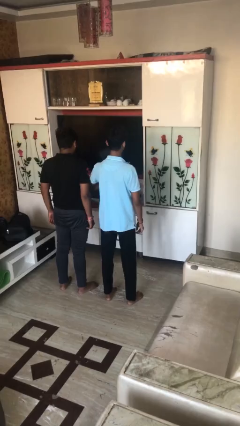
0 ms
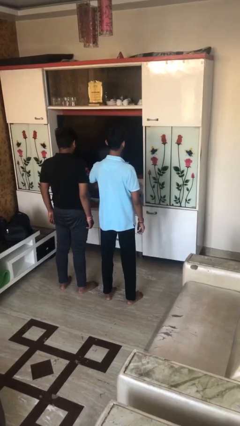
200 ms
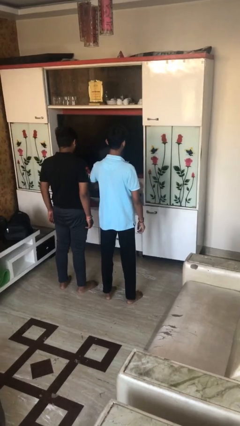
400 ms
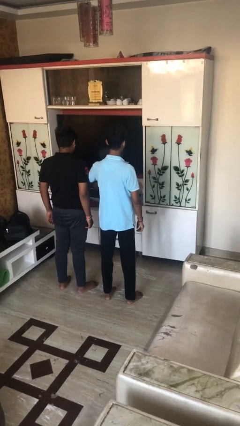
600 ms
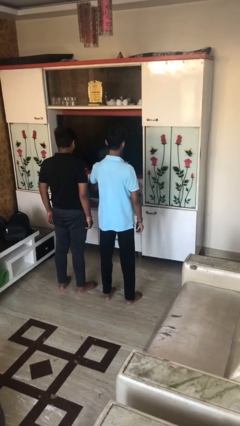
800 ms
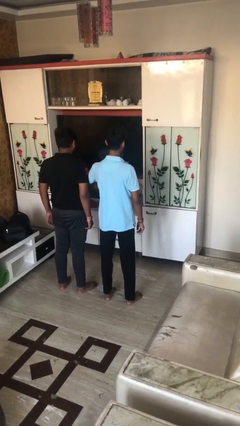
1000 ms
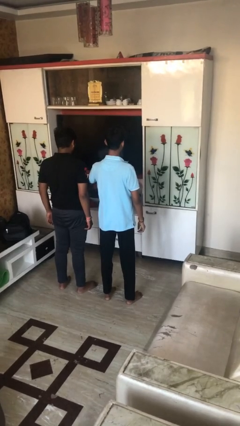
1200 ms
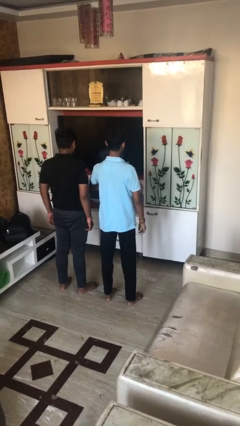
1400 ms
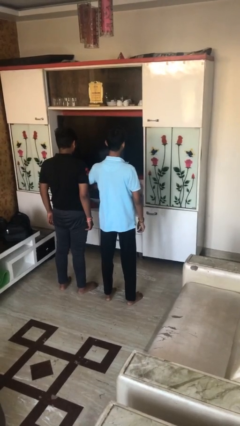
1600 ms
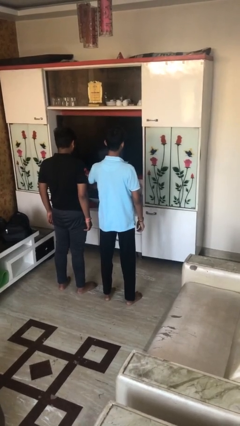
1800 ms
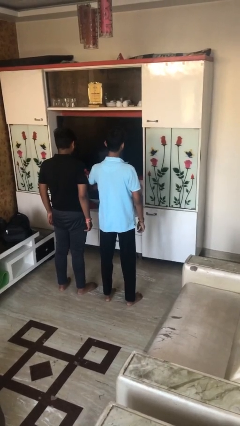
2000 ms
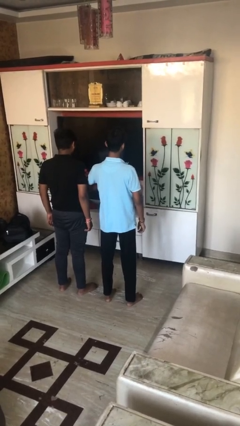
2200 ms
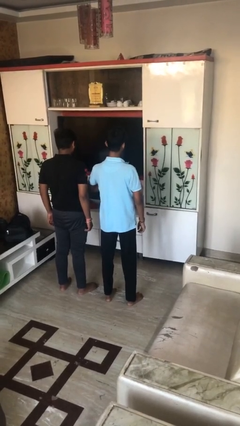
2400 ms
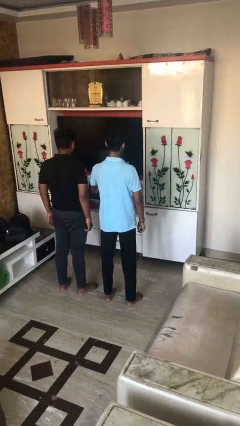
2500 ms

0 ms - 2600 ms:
person nudges person with elbow

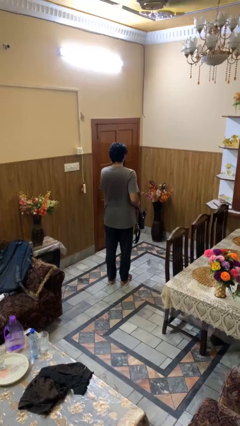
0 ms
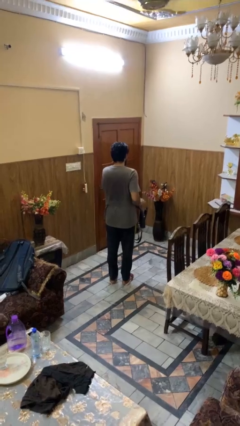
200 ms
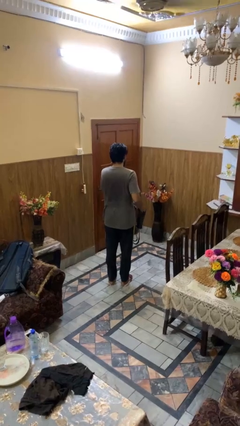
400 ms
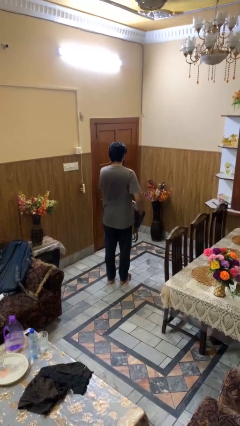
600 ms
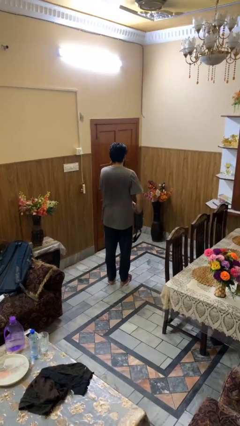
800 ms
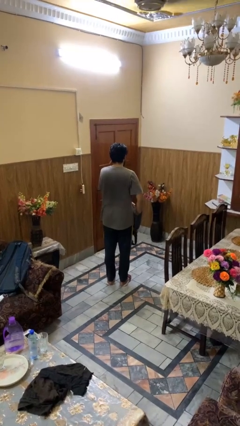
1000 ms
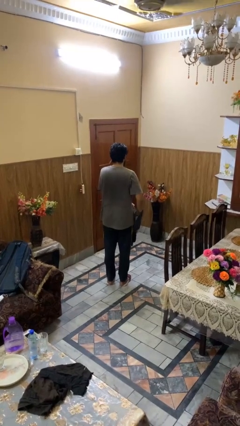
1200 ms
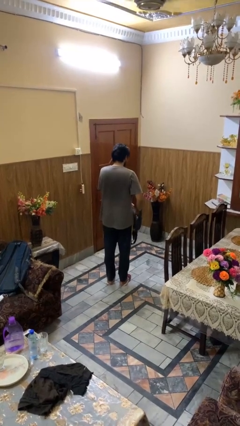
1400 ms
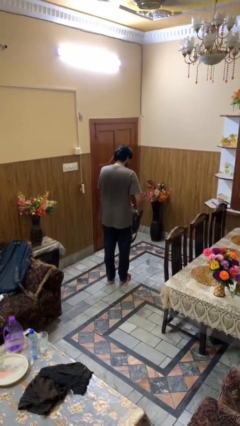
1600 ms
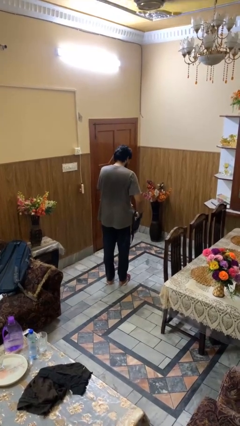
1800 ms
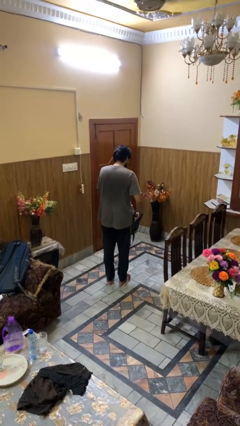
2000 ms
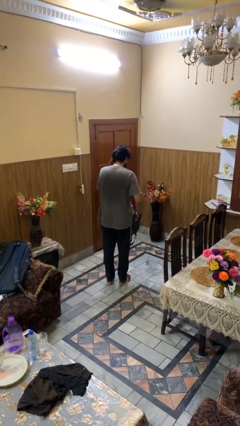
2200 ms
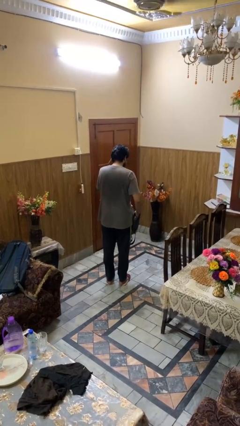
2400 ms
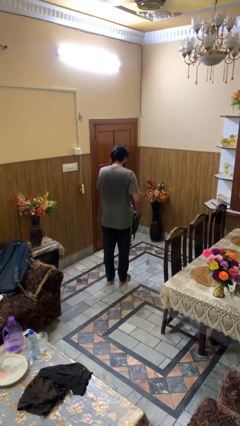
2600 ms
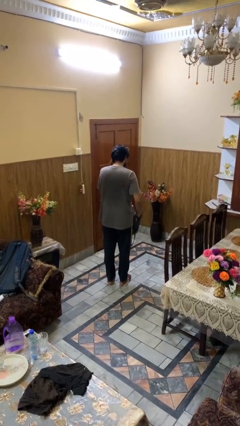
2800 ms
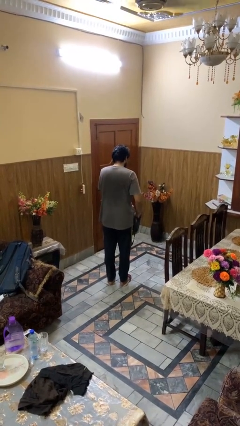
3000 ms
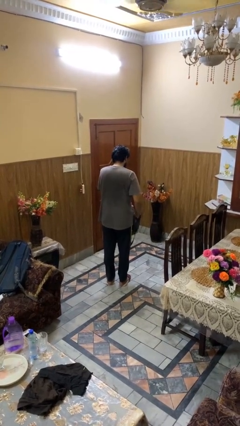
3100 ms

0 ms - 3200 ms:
person searches in purse

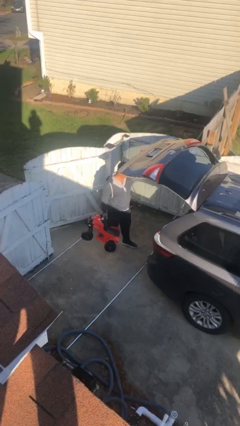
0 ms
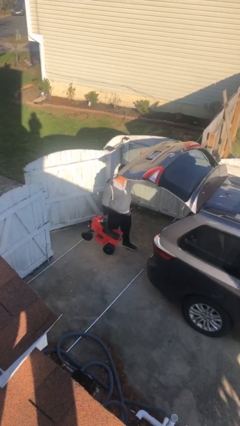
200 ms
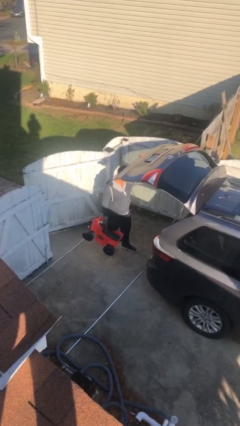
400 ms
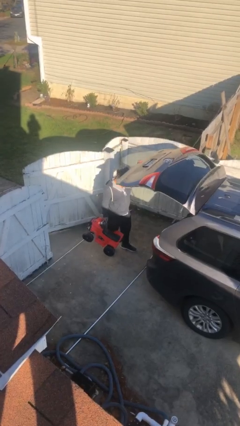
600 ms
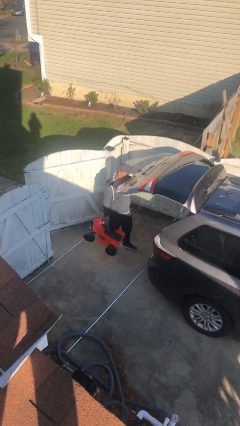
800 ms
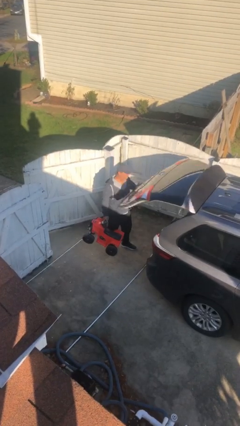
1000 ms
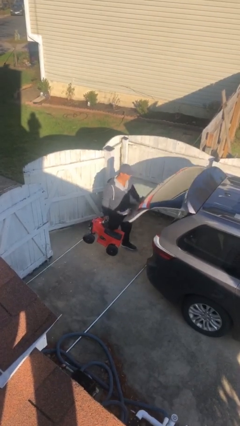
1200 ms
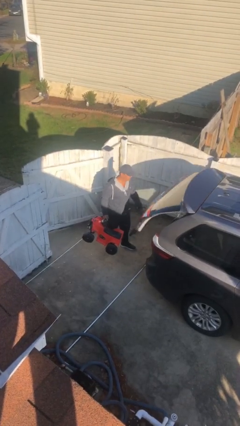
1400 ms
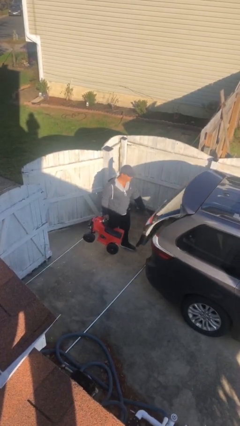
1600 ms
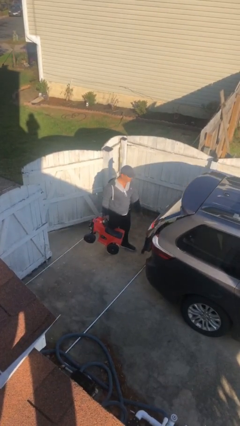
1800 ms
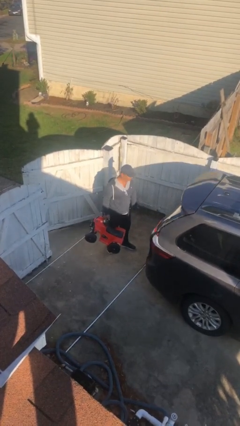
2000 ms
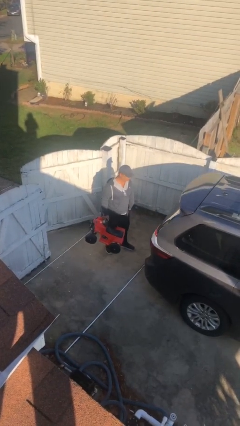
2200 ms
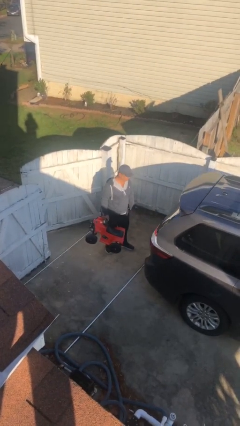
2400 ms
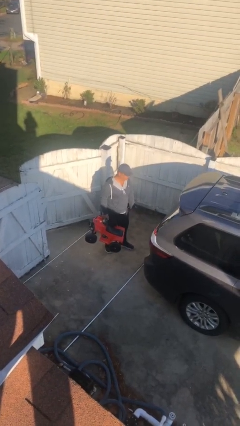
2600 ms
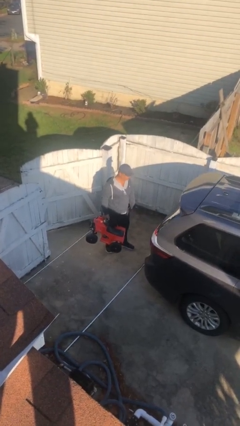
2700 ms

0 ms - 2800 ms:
person closes car trunk

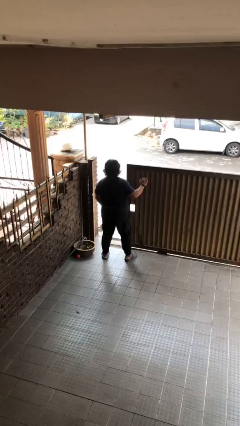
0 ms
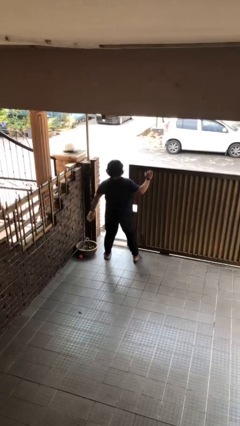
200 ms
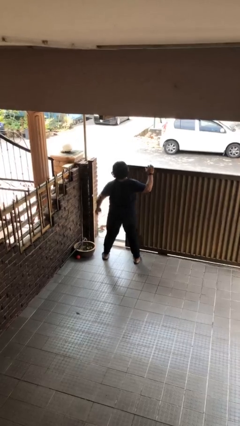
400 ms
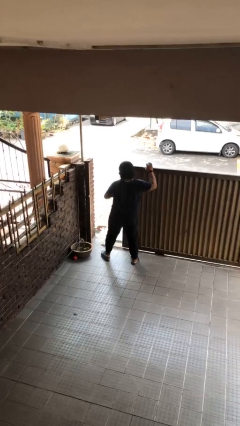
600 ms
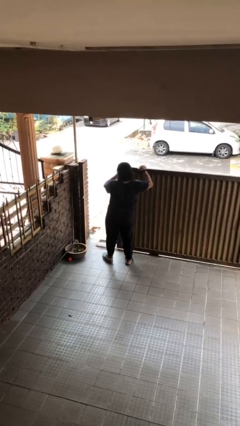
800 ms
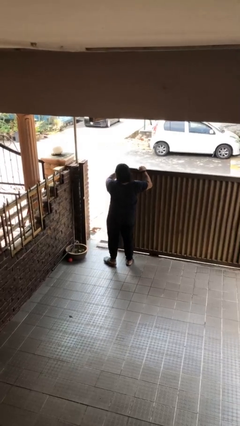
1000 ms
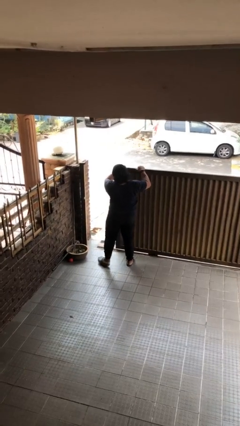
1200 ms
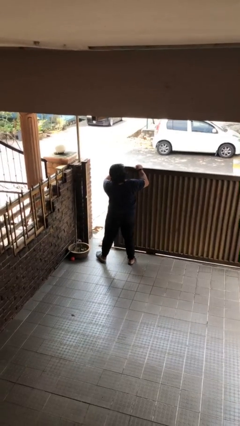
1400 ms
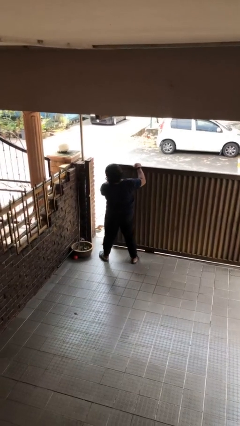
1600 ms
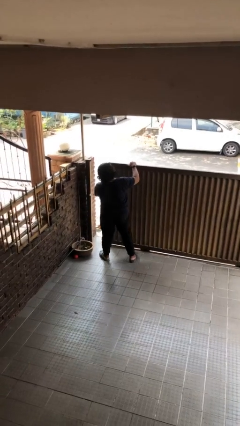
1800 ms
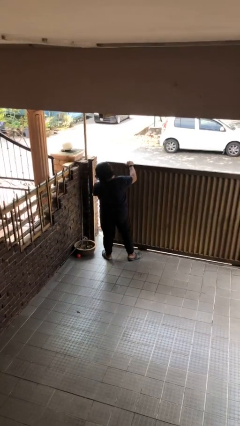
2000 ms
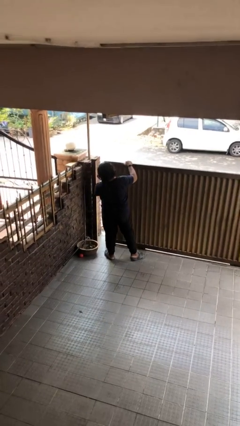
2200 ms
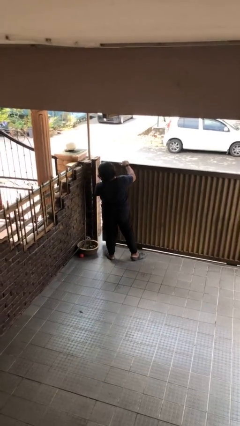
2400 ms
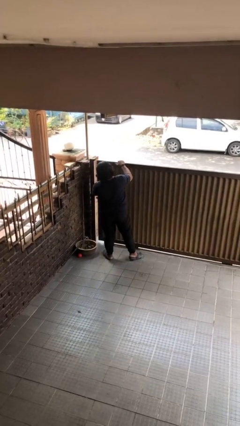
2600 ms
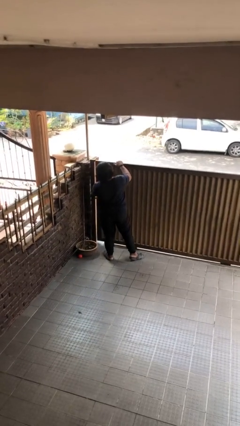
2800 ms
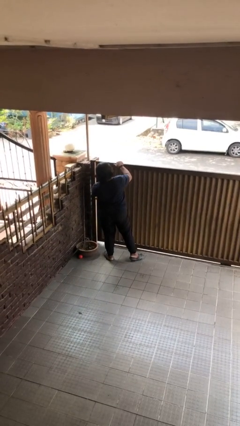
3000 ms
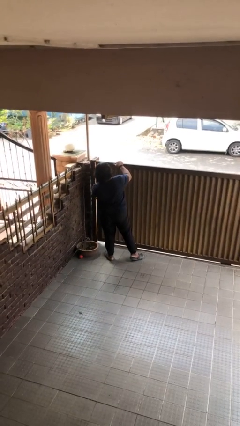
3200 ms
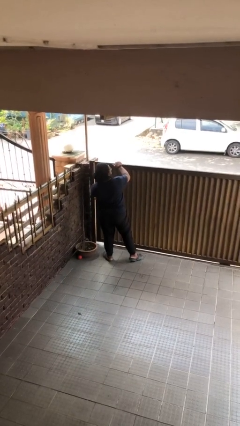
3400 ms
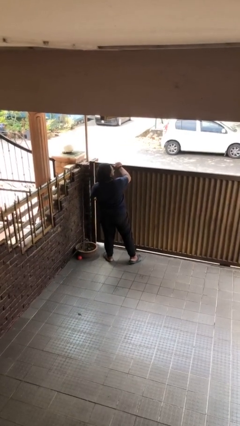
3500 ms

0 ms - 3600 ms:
person closes facility door

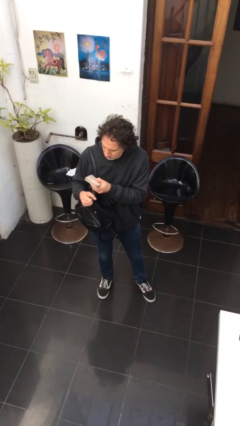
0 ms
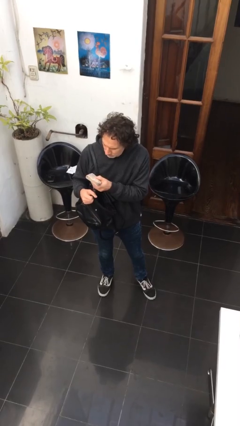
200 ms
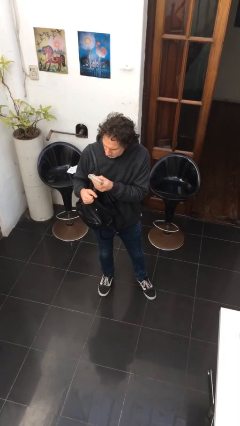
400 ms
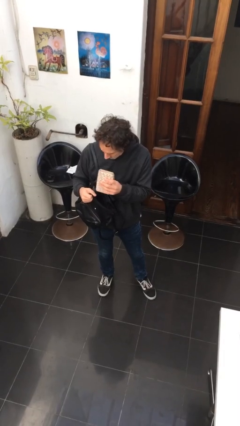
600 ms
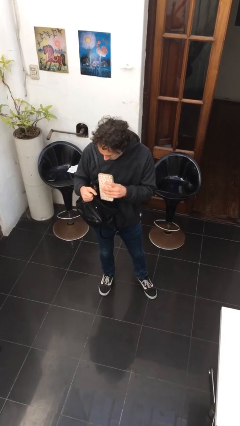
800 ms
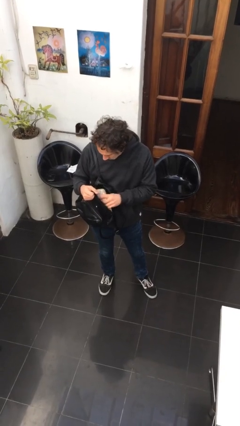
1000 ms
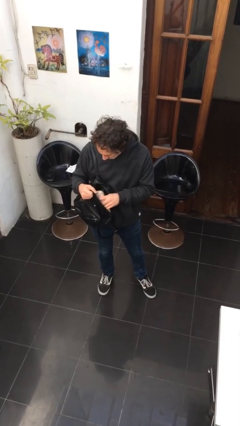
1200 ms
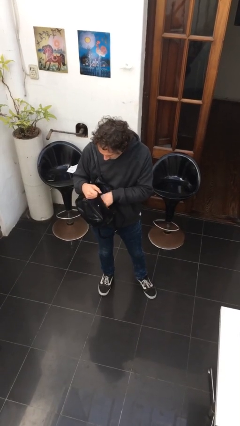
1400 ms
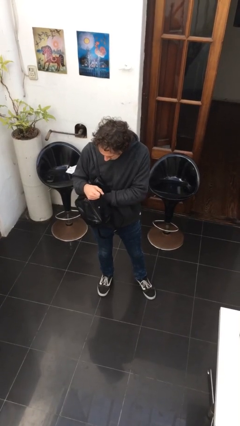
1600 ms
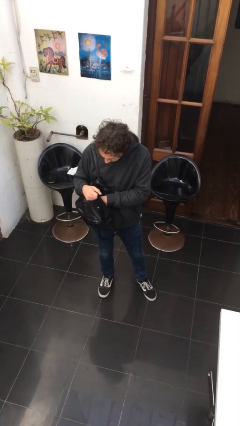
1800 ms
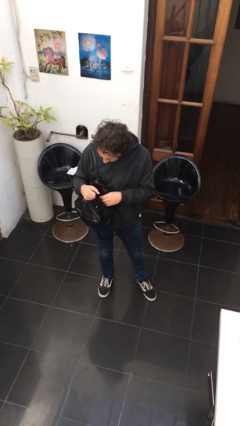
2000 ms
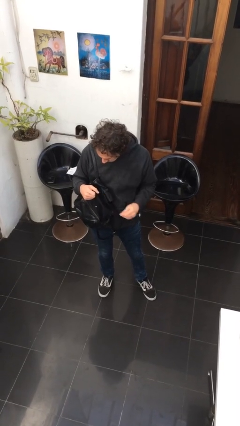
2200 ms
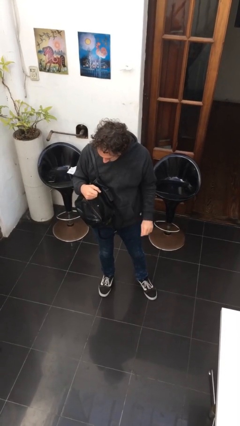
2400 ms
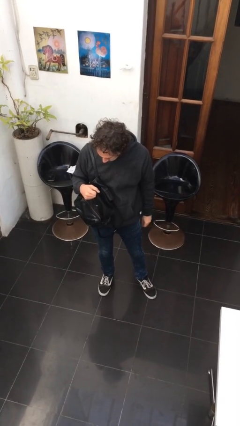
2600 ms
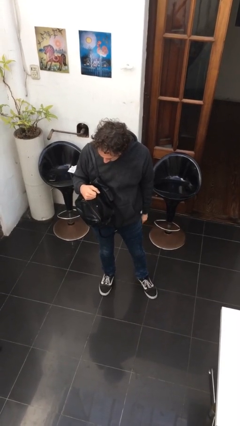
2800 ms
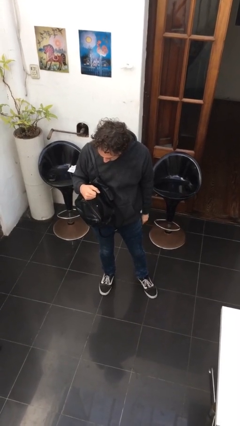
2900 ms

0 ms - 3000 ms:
person puts object into purse

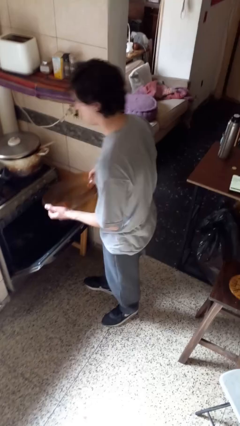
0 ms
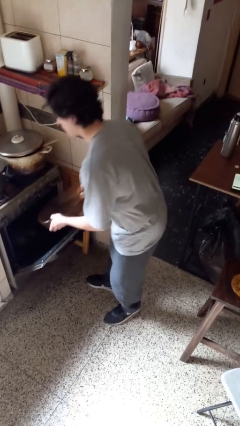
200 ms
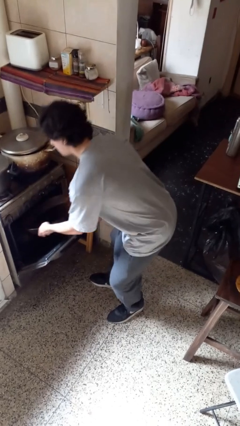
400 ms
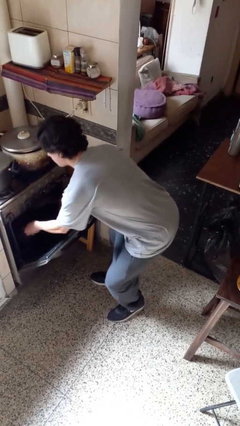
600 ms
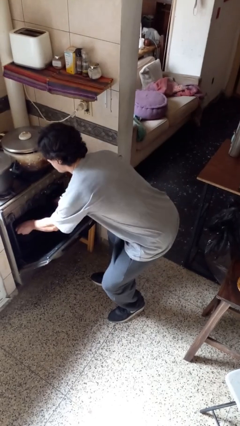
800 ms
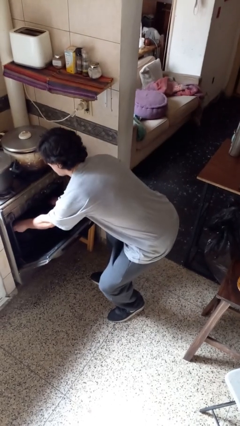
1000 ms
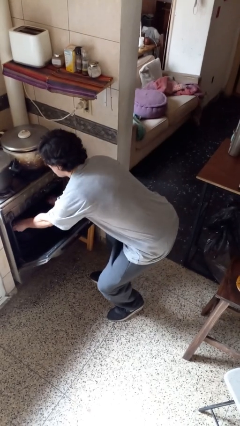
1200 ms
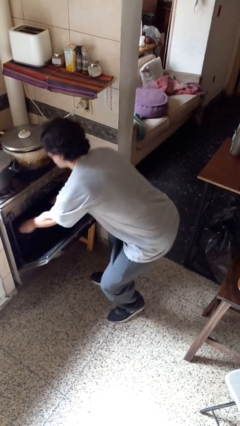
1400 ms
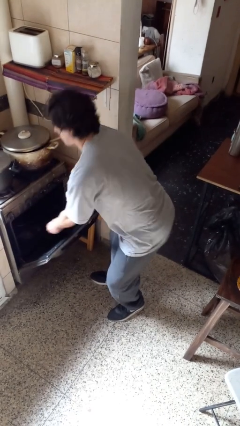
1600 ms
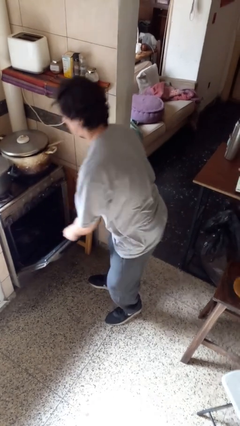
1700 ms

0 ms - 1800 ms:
person puts object into oven
